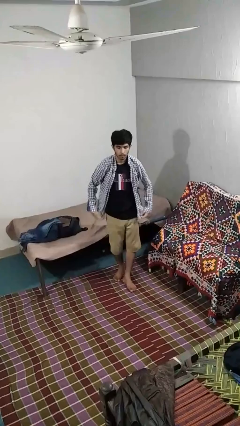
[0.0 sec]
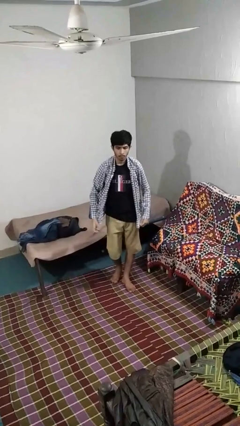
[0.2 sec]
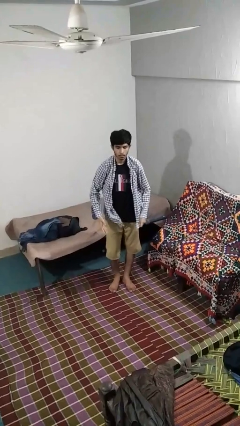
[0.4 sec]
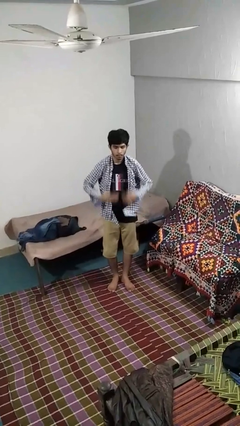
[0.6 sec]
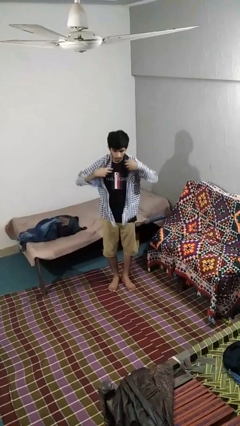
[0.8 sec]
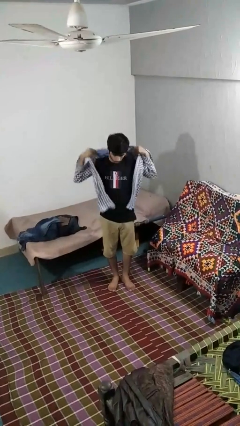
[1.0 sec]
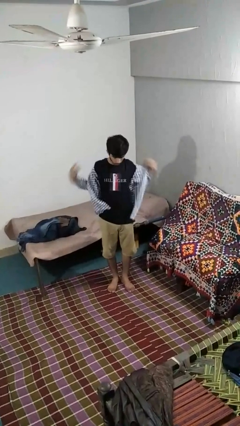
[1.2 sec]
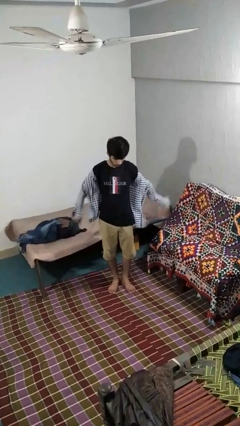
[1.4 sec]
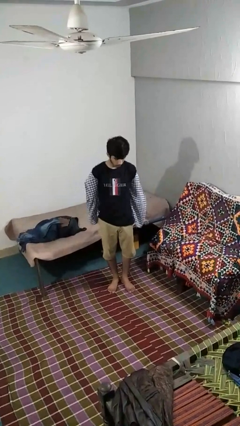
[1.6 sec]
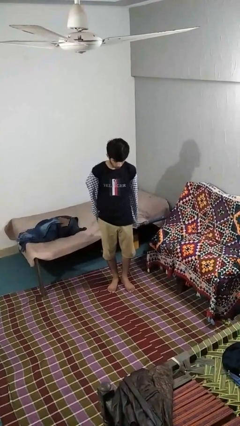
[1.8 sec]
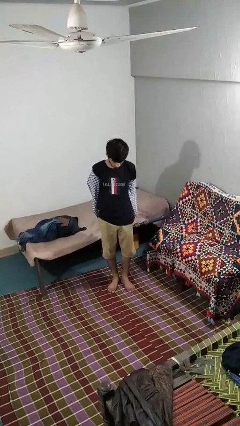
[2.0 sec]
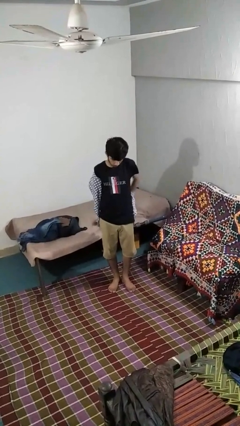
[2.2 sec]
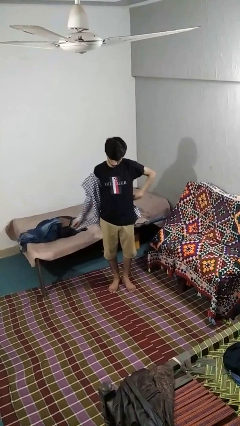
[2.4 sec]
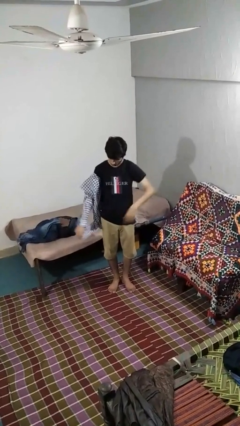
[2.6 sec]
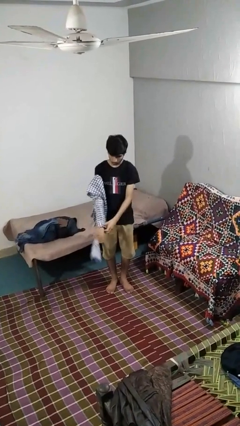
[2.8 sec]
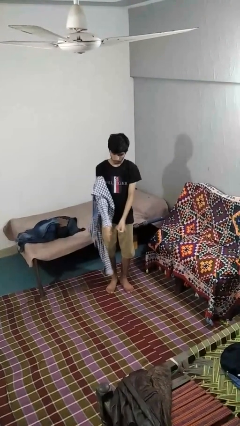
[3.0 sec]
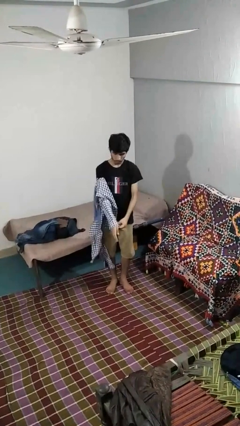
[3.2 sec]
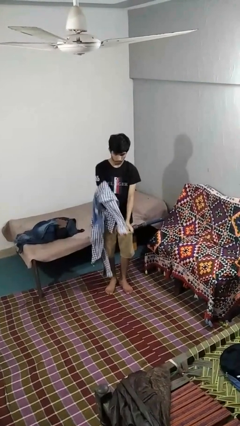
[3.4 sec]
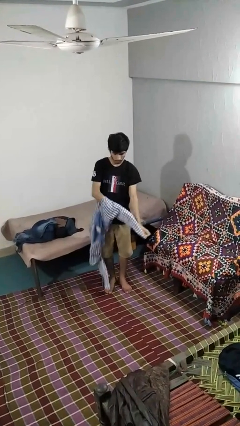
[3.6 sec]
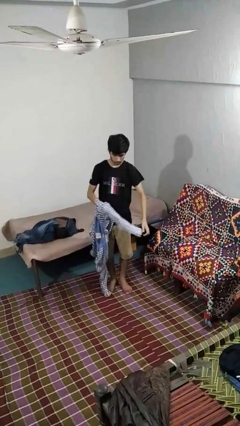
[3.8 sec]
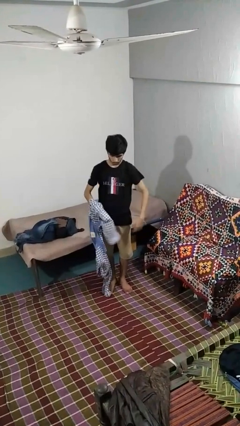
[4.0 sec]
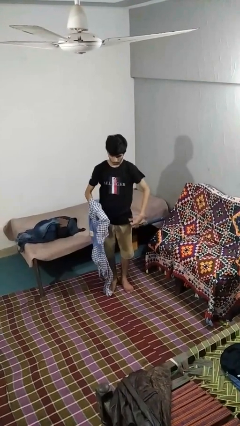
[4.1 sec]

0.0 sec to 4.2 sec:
person takes off shirt

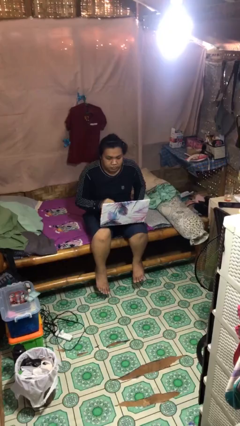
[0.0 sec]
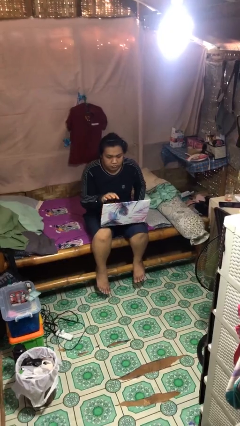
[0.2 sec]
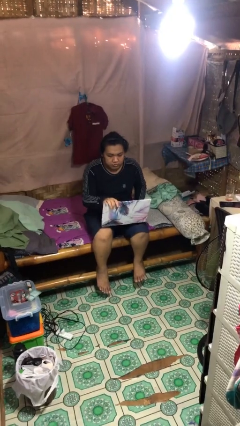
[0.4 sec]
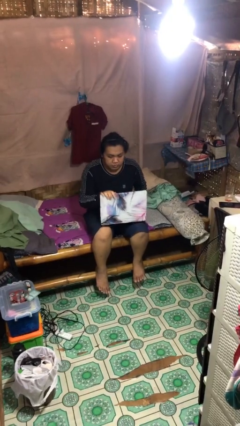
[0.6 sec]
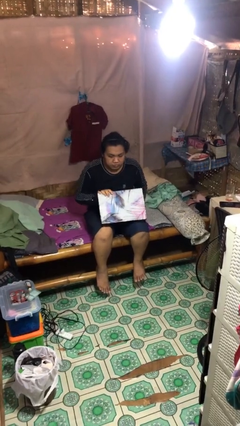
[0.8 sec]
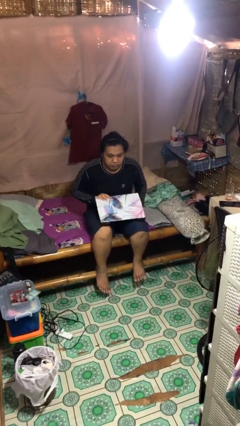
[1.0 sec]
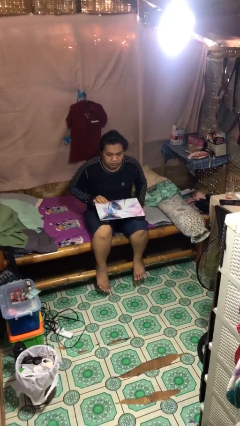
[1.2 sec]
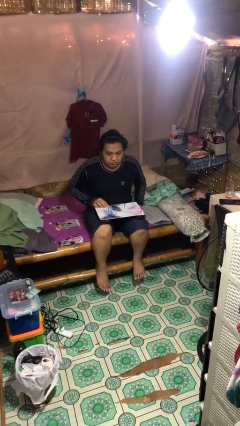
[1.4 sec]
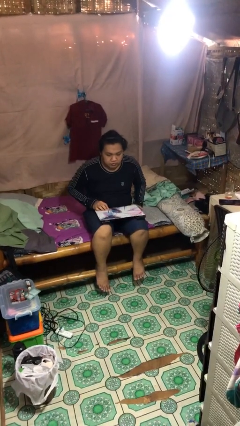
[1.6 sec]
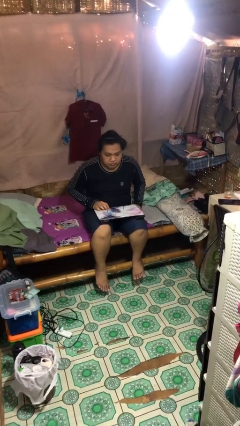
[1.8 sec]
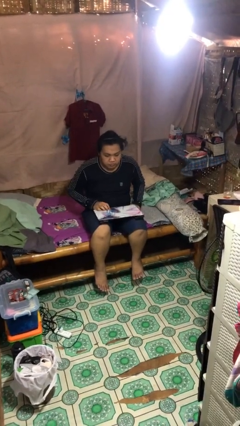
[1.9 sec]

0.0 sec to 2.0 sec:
person closes laptop

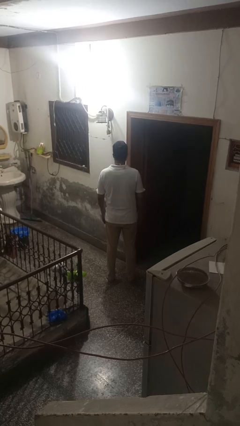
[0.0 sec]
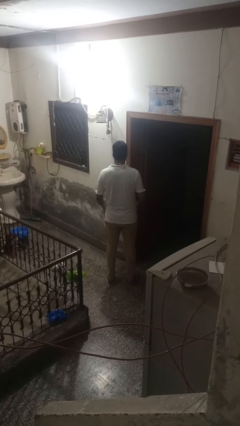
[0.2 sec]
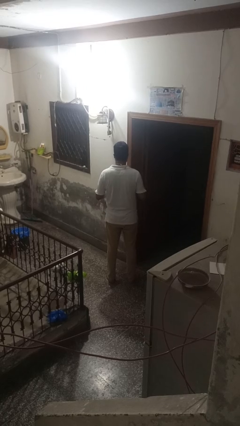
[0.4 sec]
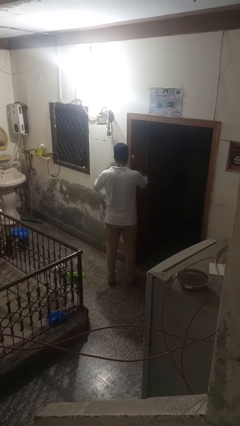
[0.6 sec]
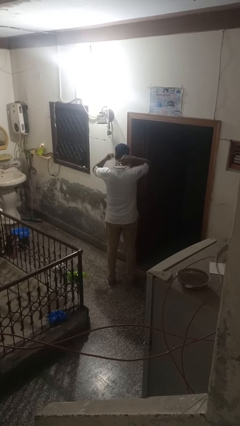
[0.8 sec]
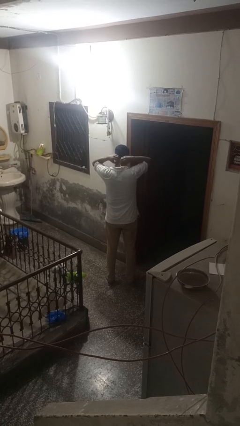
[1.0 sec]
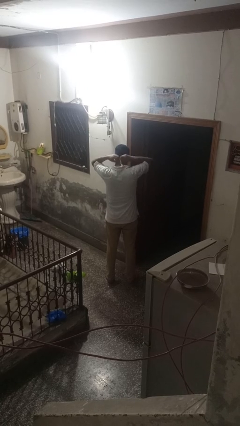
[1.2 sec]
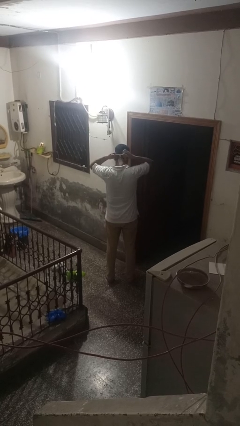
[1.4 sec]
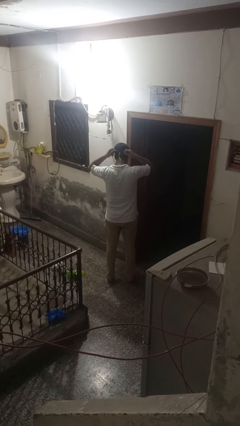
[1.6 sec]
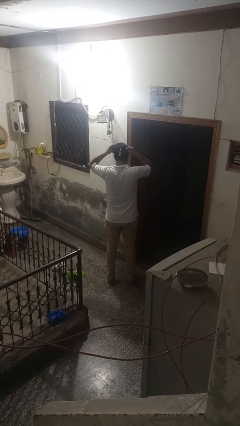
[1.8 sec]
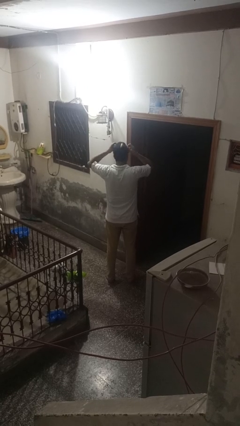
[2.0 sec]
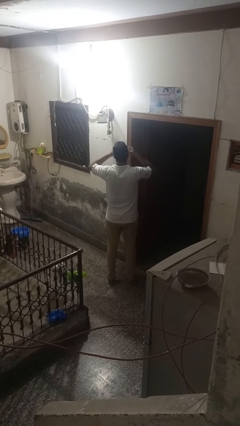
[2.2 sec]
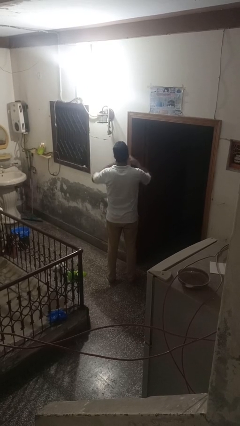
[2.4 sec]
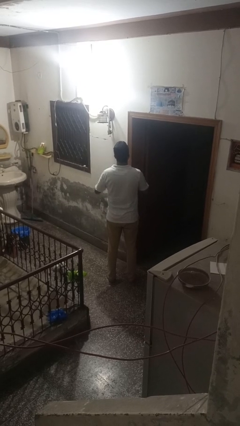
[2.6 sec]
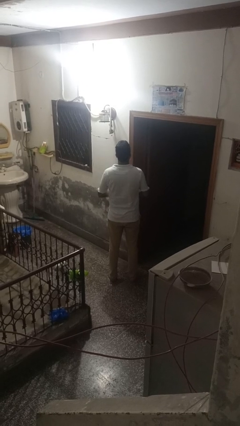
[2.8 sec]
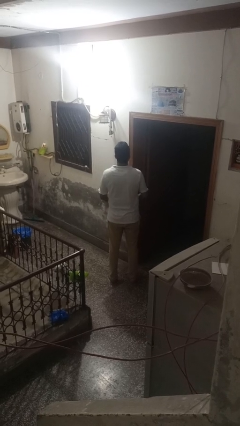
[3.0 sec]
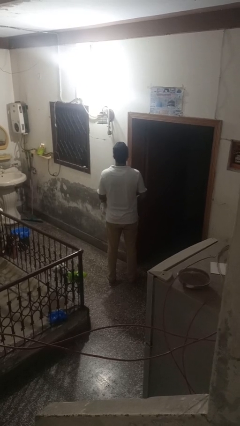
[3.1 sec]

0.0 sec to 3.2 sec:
person takes off necklace

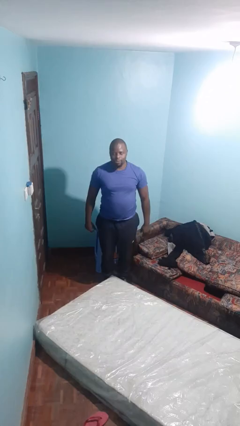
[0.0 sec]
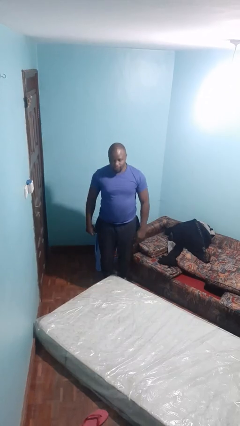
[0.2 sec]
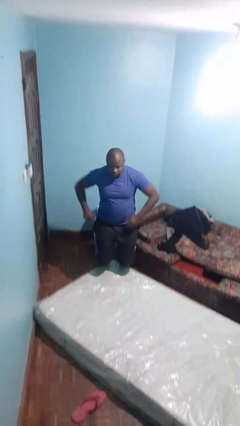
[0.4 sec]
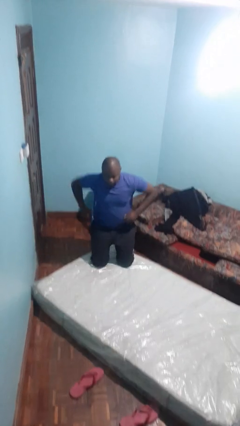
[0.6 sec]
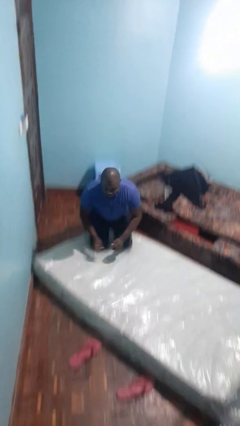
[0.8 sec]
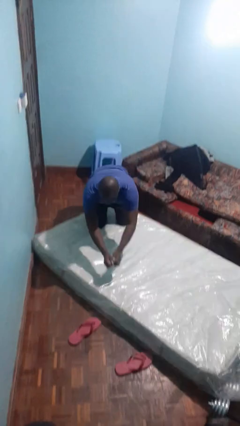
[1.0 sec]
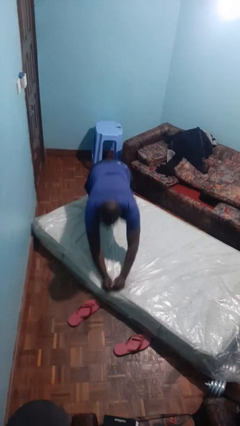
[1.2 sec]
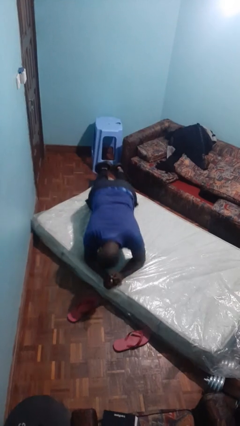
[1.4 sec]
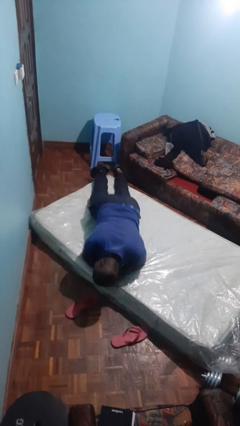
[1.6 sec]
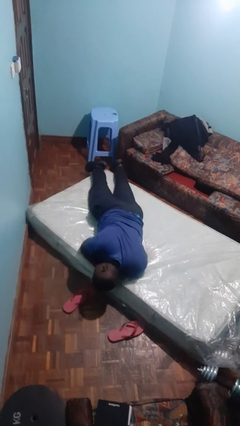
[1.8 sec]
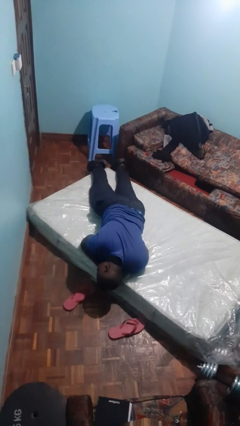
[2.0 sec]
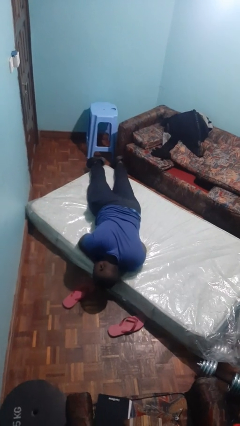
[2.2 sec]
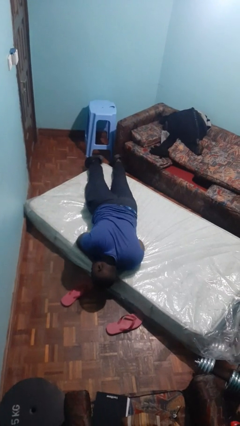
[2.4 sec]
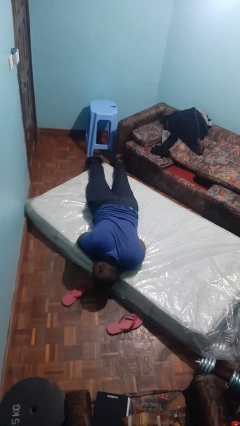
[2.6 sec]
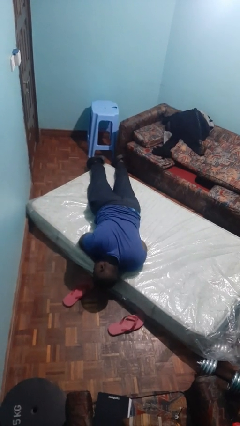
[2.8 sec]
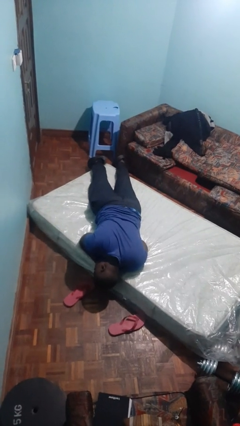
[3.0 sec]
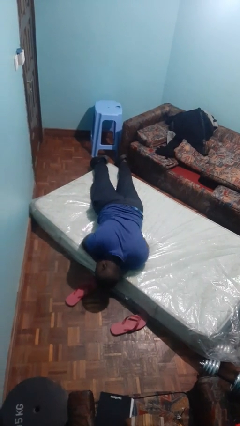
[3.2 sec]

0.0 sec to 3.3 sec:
person lies down on bed

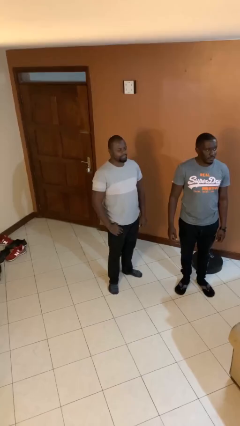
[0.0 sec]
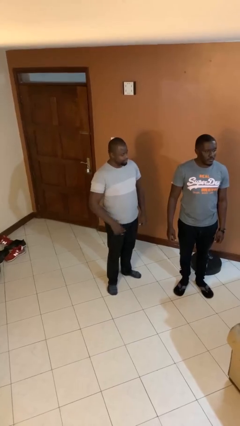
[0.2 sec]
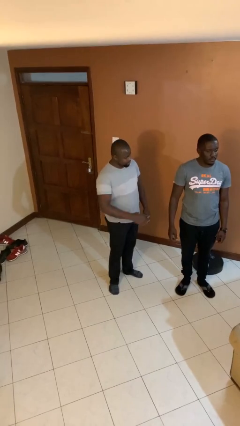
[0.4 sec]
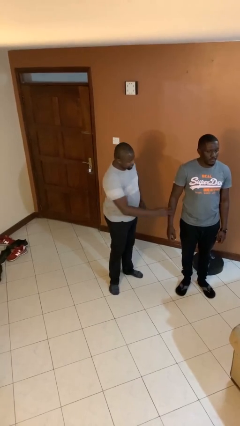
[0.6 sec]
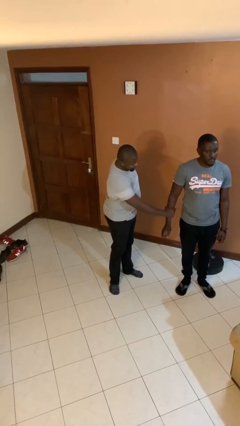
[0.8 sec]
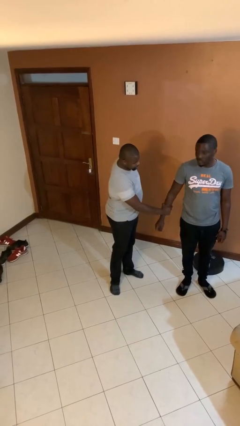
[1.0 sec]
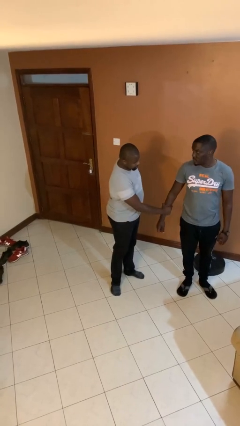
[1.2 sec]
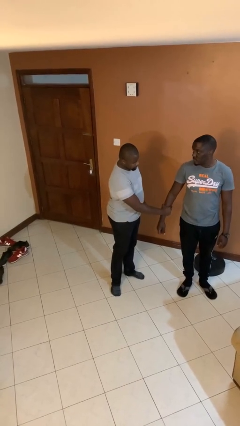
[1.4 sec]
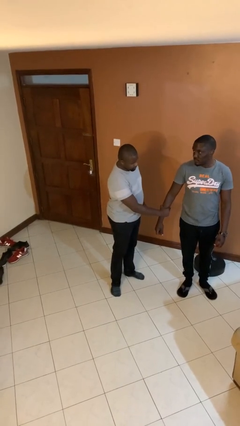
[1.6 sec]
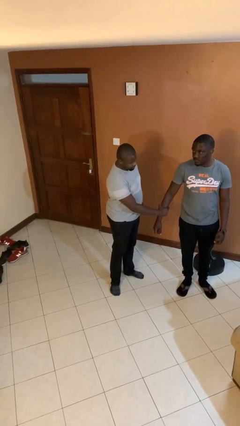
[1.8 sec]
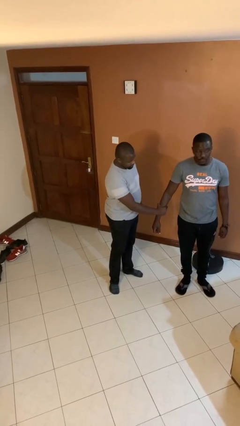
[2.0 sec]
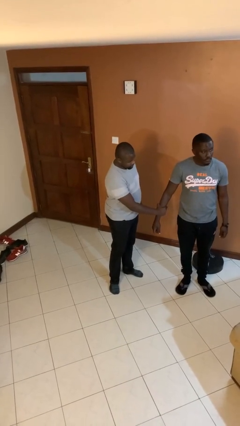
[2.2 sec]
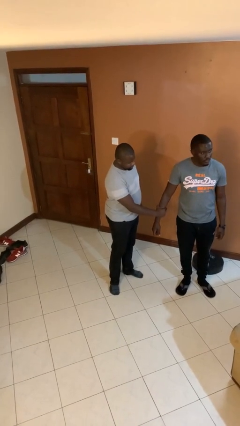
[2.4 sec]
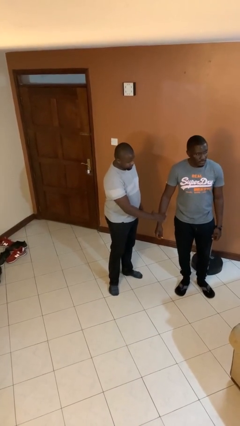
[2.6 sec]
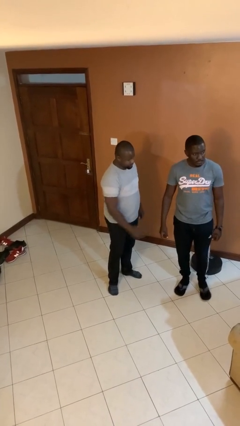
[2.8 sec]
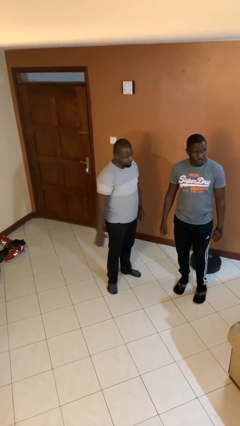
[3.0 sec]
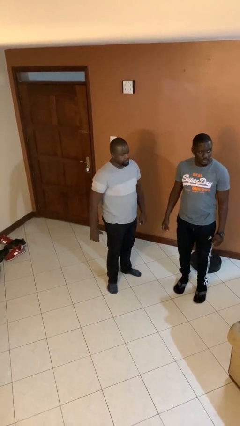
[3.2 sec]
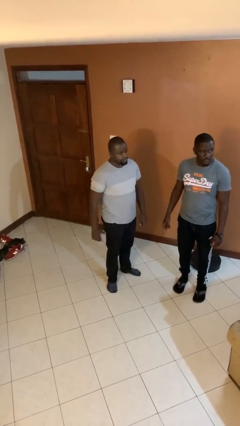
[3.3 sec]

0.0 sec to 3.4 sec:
person grabs person by forearm

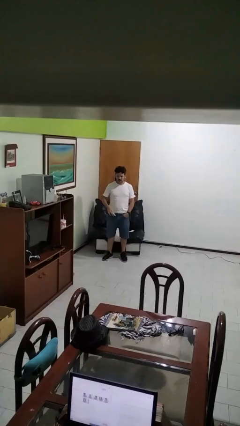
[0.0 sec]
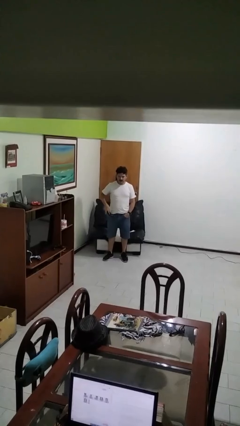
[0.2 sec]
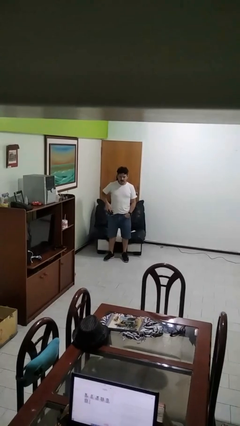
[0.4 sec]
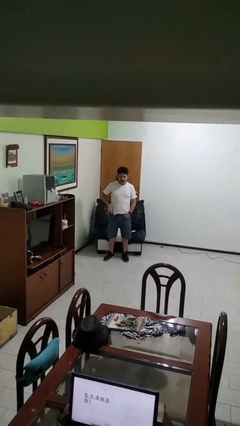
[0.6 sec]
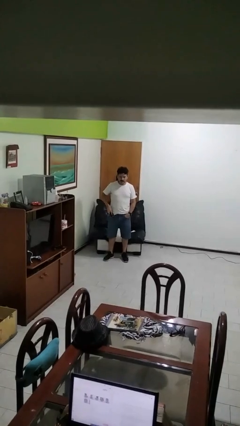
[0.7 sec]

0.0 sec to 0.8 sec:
person puts phone into pocket

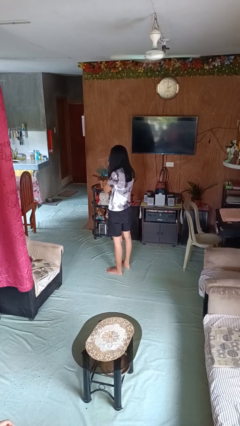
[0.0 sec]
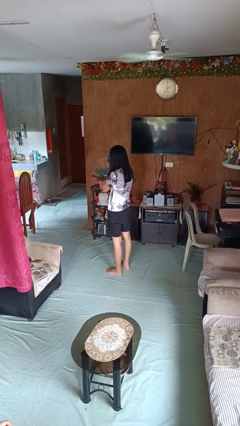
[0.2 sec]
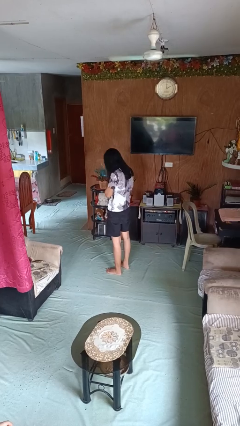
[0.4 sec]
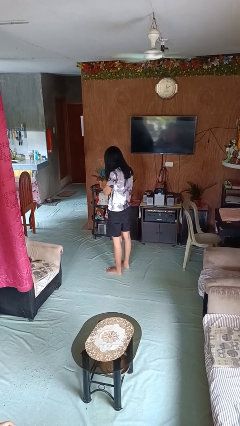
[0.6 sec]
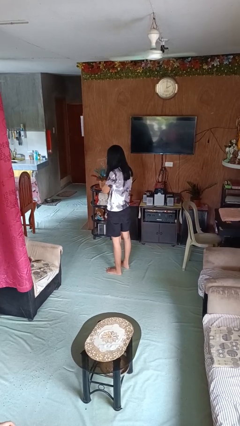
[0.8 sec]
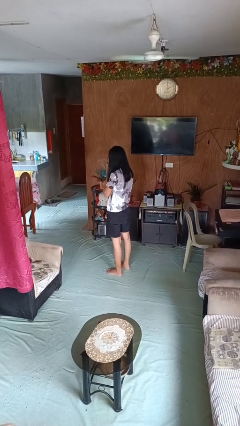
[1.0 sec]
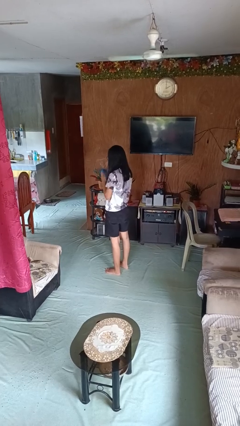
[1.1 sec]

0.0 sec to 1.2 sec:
person blows nose
